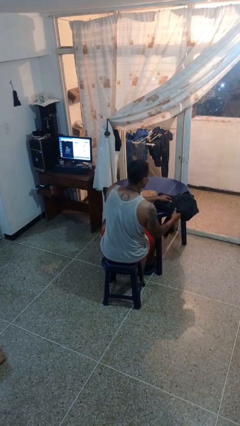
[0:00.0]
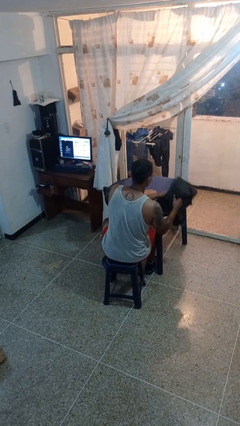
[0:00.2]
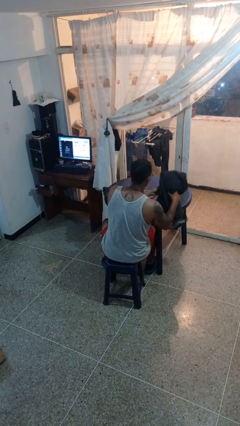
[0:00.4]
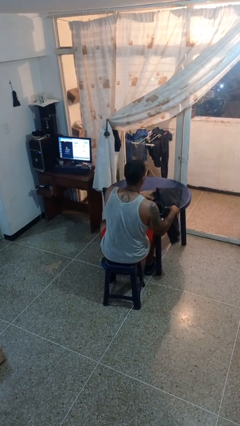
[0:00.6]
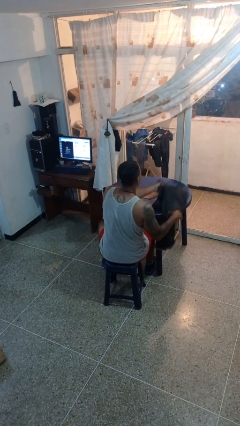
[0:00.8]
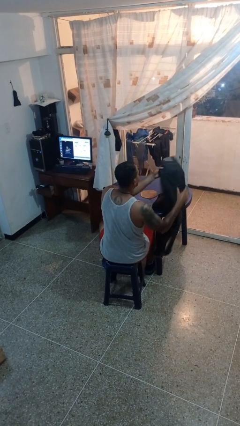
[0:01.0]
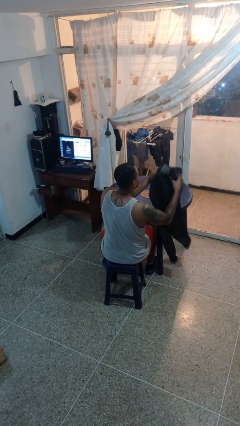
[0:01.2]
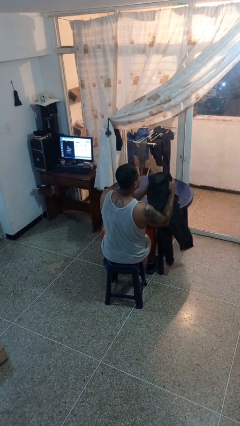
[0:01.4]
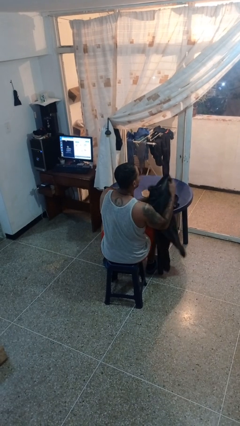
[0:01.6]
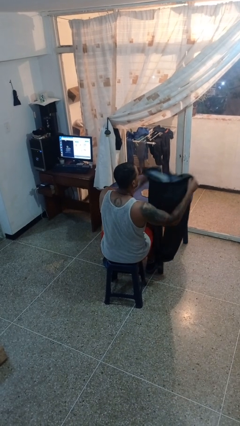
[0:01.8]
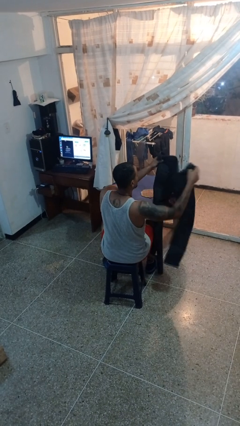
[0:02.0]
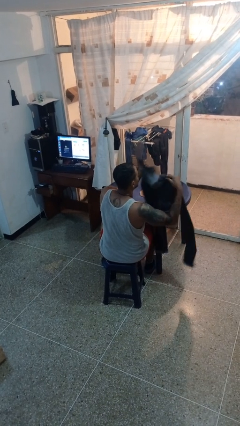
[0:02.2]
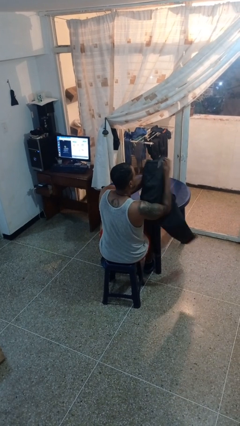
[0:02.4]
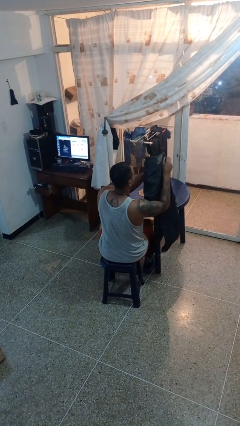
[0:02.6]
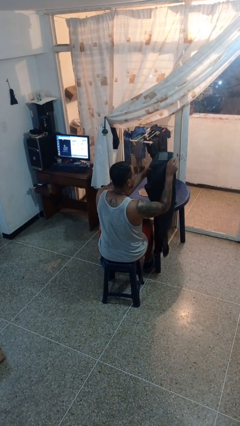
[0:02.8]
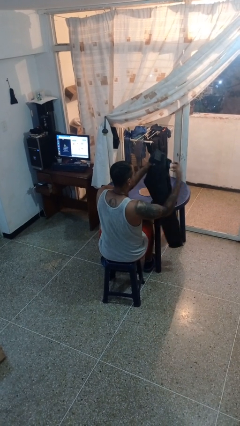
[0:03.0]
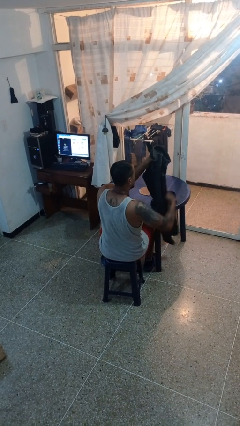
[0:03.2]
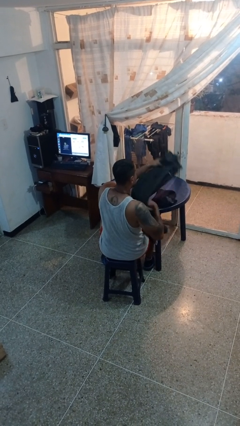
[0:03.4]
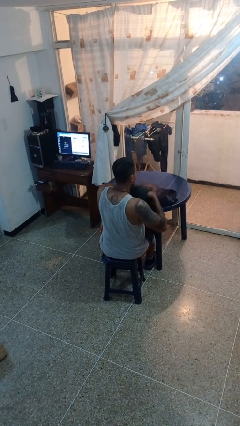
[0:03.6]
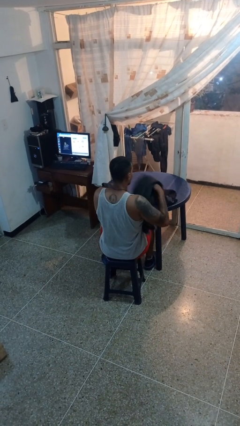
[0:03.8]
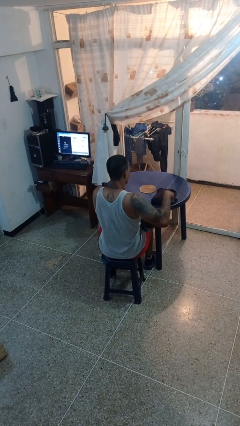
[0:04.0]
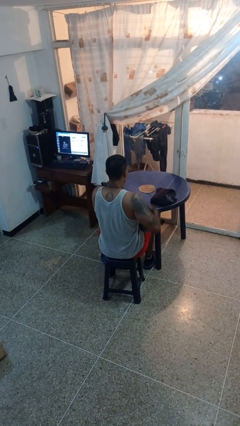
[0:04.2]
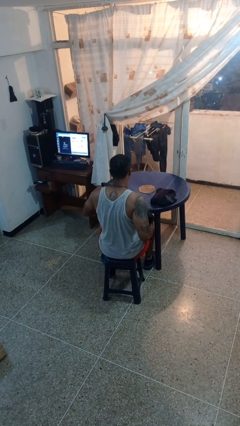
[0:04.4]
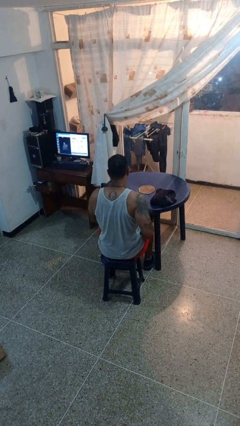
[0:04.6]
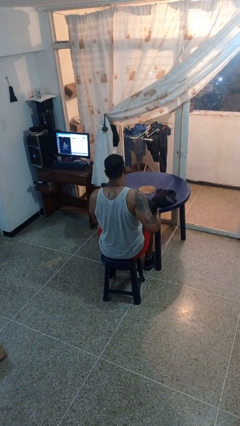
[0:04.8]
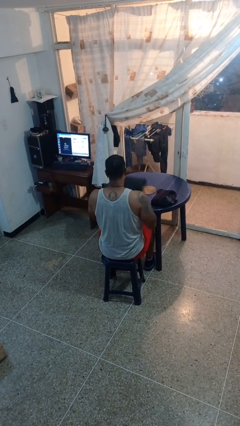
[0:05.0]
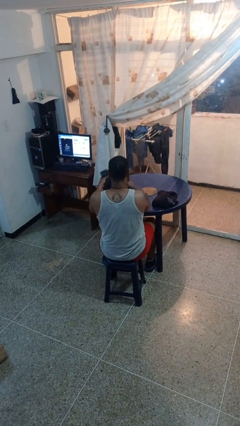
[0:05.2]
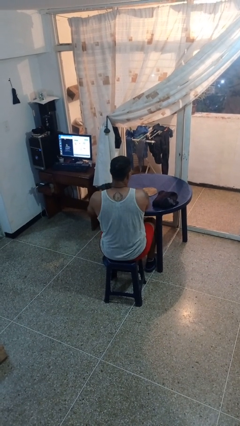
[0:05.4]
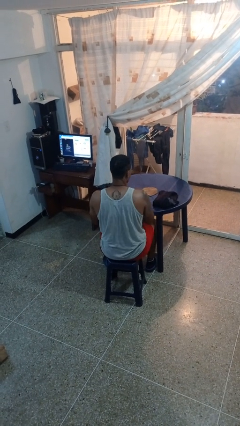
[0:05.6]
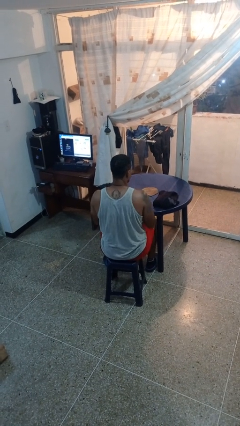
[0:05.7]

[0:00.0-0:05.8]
person folds pants

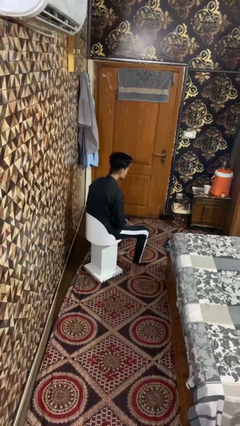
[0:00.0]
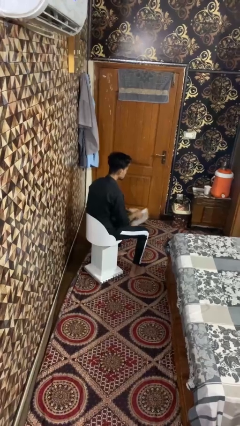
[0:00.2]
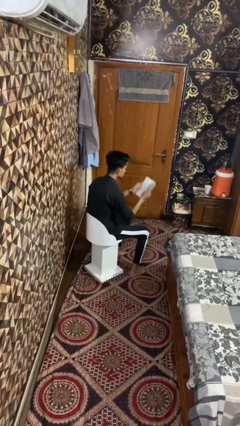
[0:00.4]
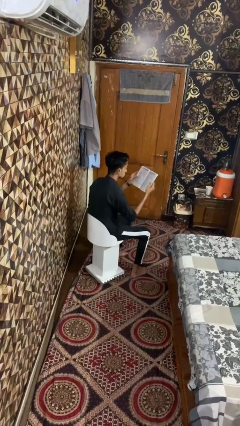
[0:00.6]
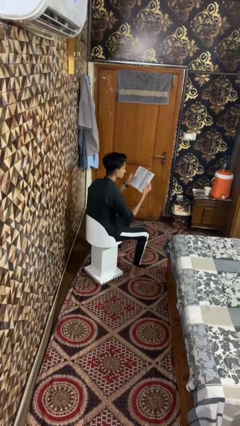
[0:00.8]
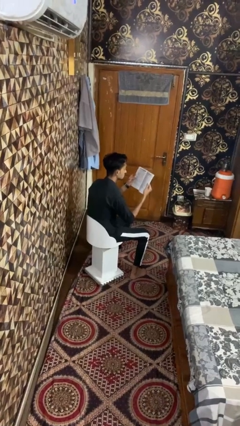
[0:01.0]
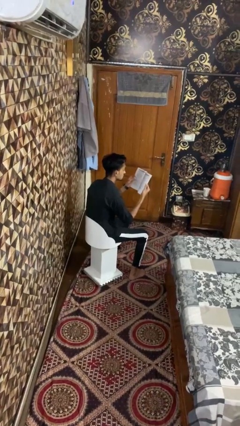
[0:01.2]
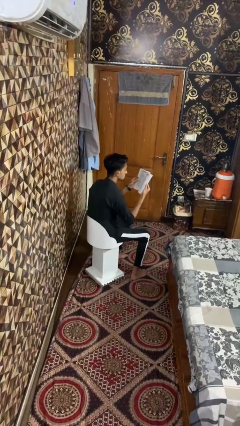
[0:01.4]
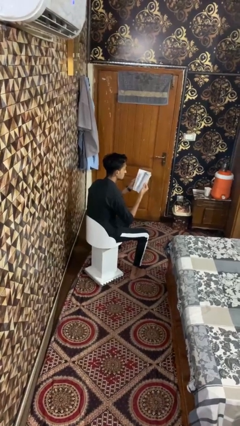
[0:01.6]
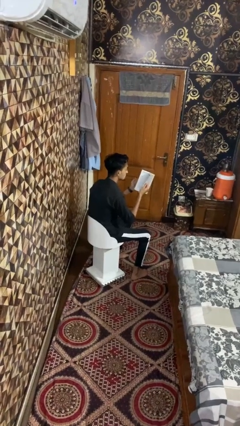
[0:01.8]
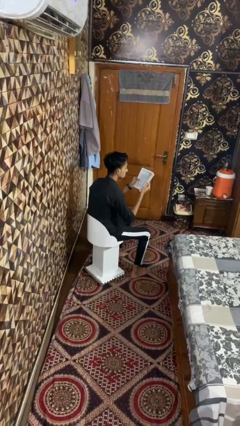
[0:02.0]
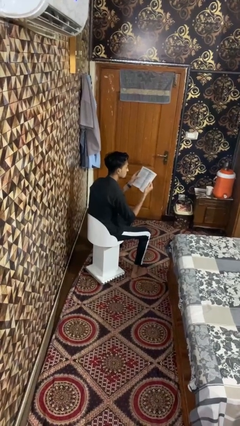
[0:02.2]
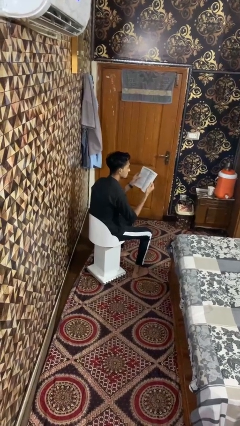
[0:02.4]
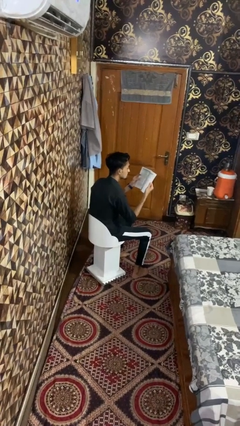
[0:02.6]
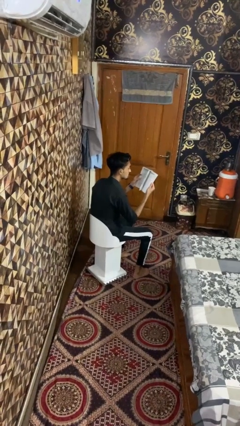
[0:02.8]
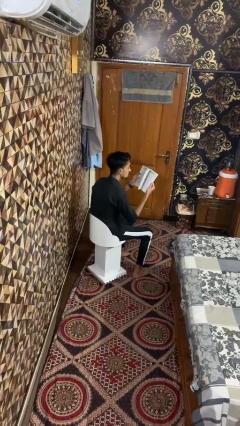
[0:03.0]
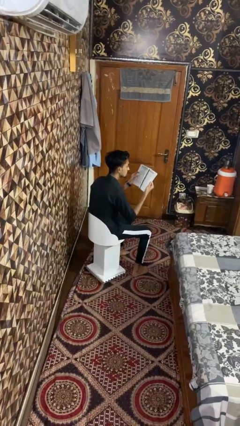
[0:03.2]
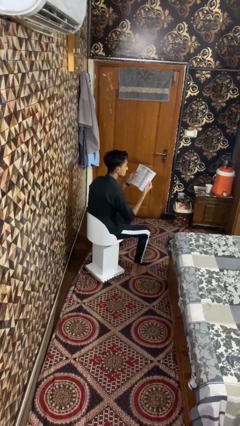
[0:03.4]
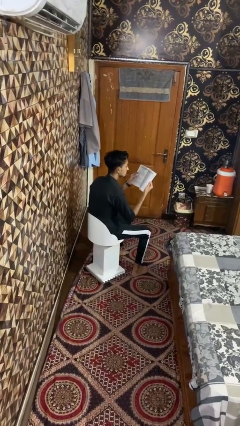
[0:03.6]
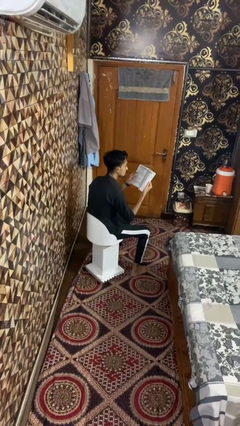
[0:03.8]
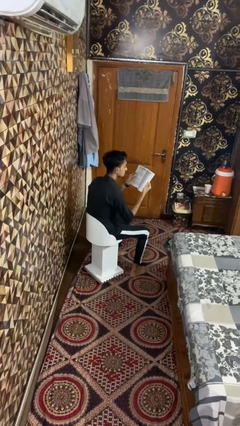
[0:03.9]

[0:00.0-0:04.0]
person reads book

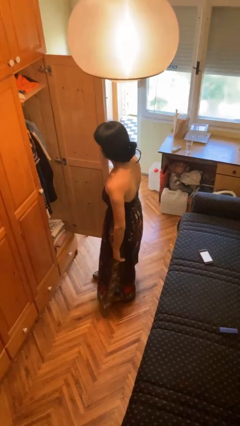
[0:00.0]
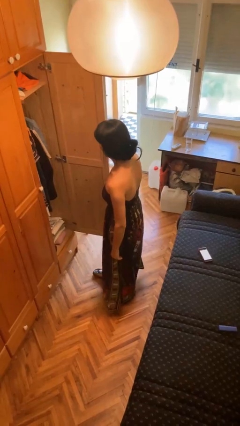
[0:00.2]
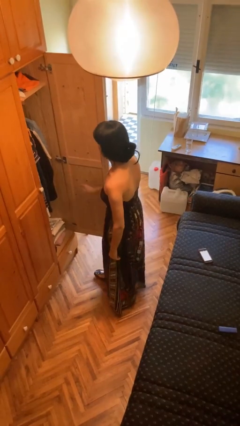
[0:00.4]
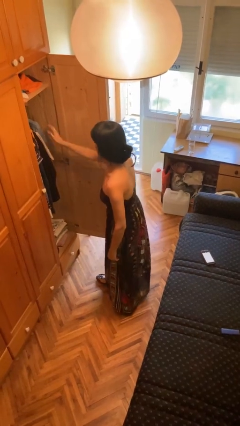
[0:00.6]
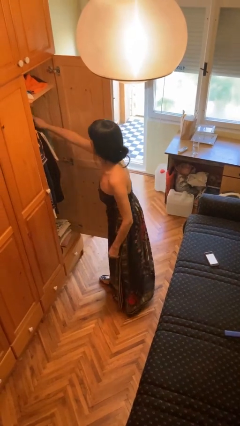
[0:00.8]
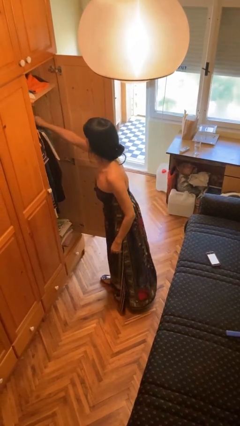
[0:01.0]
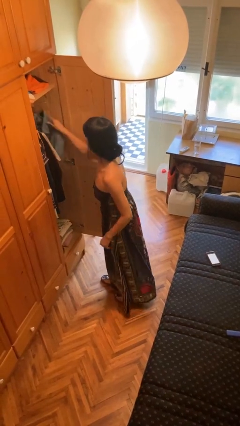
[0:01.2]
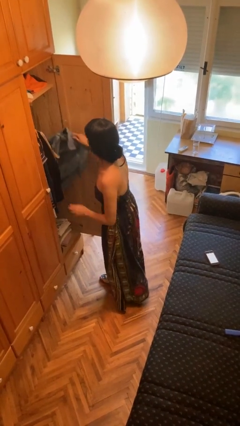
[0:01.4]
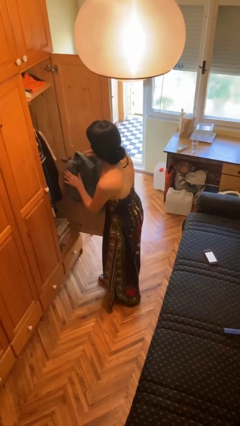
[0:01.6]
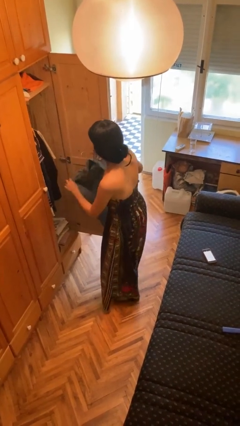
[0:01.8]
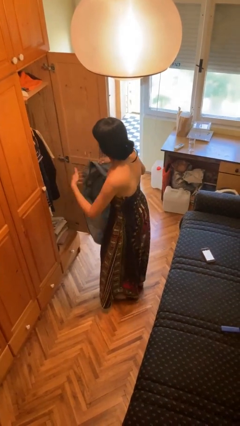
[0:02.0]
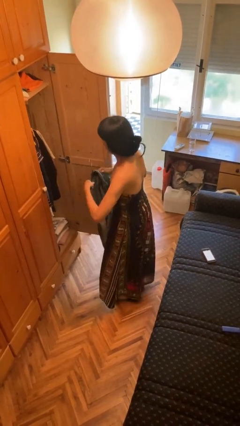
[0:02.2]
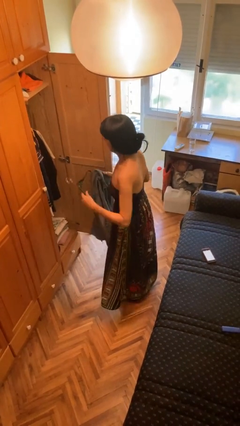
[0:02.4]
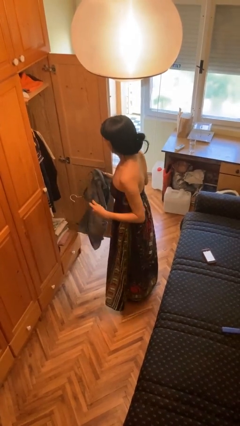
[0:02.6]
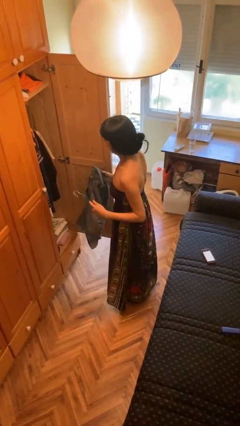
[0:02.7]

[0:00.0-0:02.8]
person takes clothes from closet

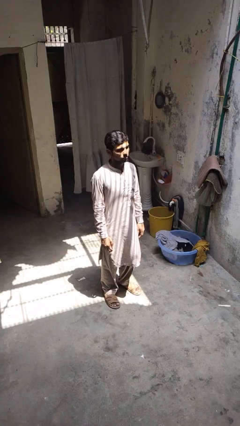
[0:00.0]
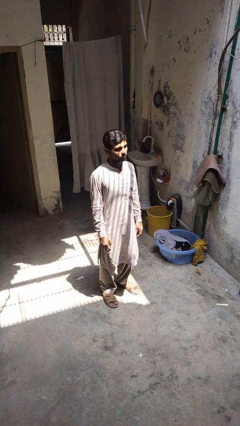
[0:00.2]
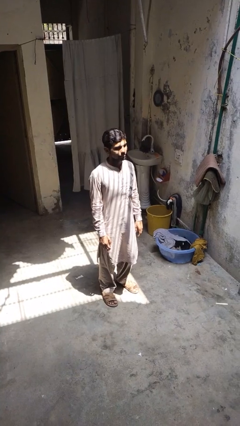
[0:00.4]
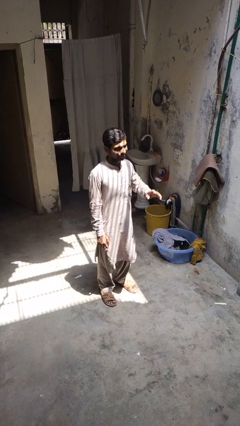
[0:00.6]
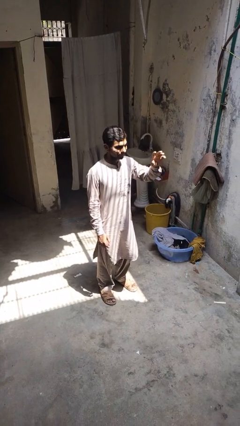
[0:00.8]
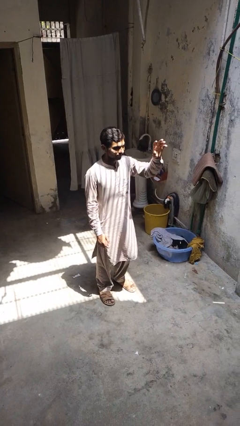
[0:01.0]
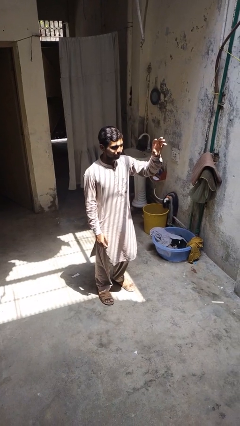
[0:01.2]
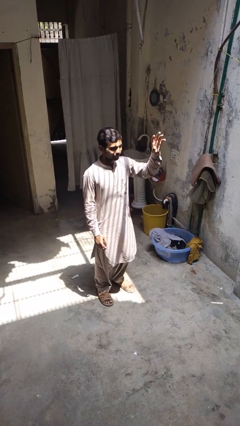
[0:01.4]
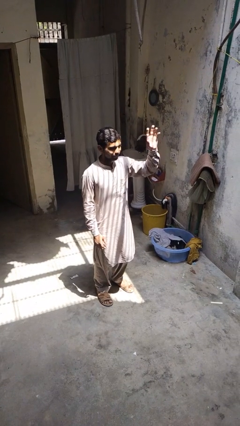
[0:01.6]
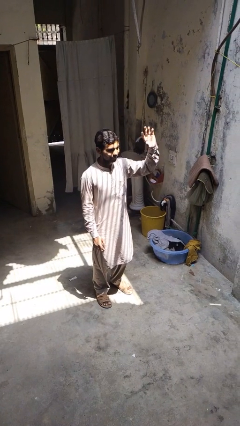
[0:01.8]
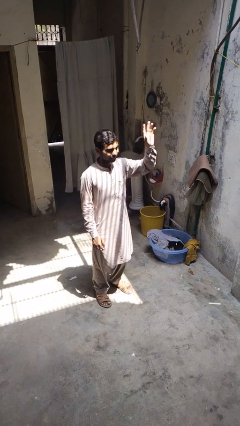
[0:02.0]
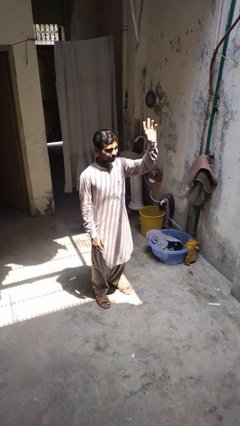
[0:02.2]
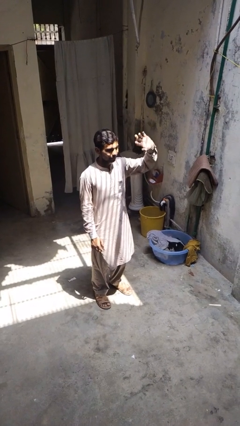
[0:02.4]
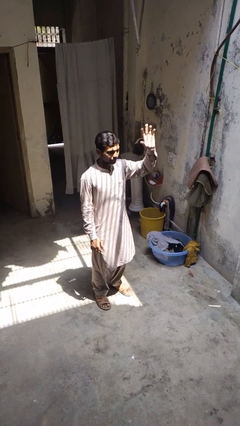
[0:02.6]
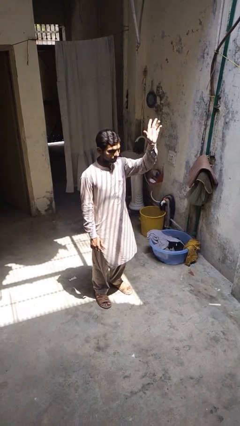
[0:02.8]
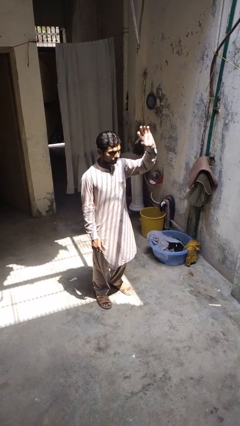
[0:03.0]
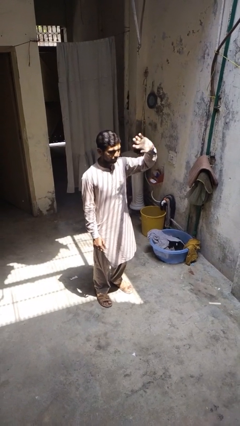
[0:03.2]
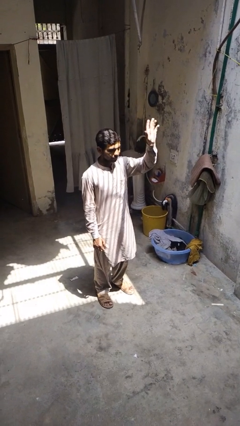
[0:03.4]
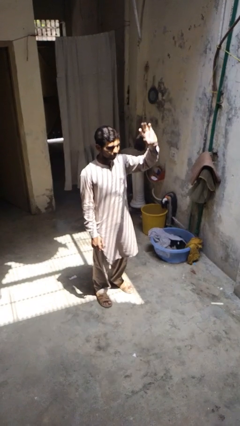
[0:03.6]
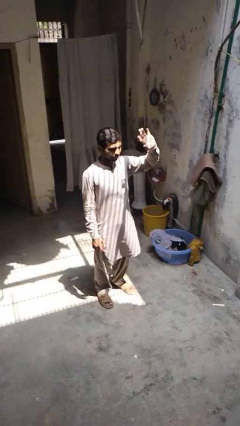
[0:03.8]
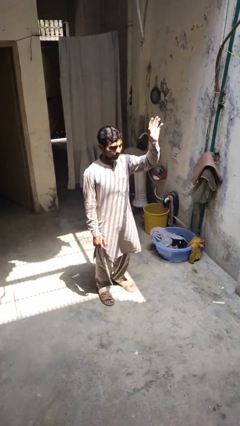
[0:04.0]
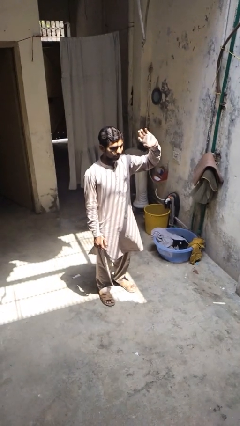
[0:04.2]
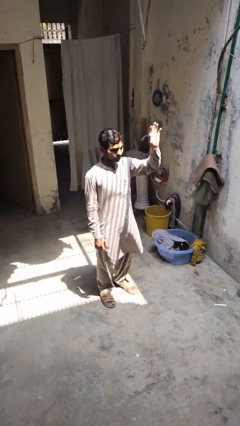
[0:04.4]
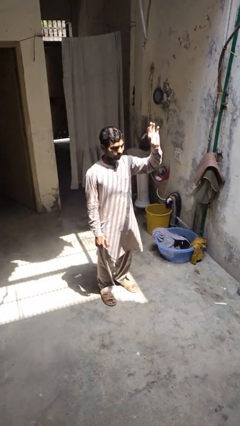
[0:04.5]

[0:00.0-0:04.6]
person waves at person

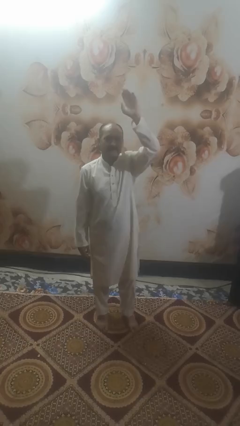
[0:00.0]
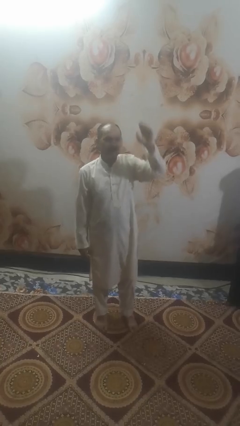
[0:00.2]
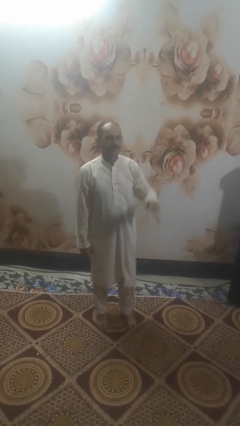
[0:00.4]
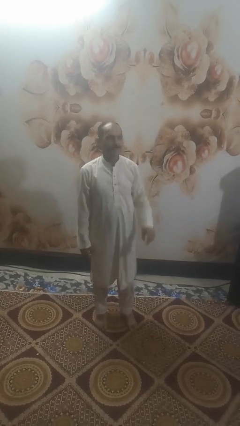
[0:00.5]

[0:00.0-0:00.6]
person gestures lower hand
